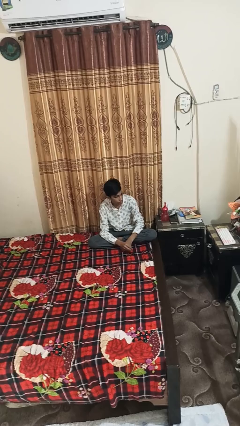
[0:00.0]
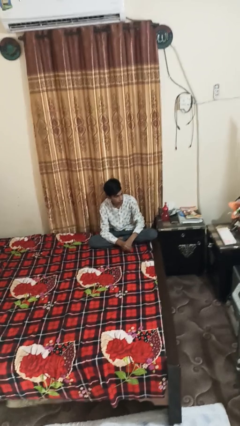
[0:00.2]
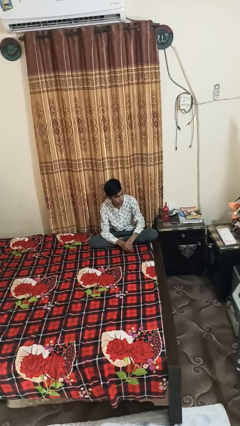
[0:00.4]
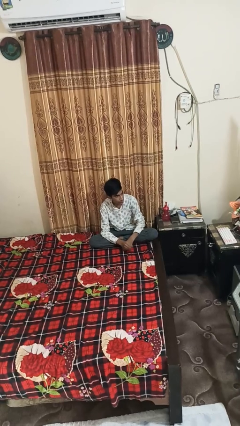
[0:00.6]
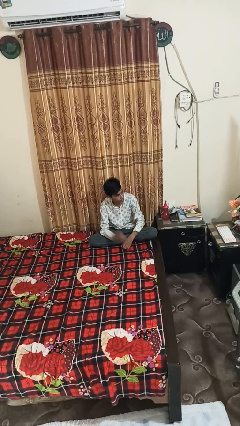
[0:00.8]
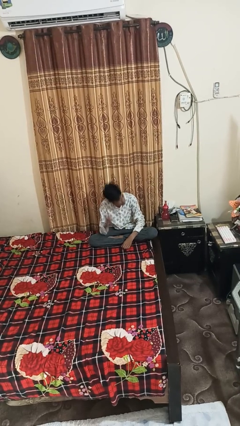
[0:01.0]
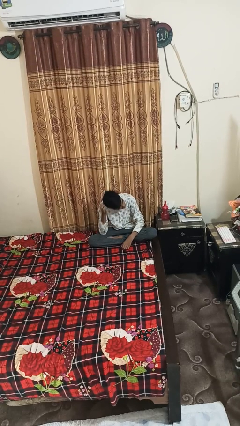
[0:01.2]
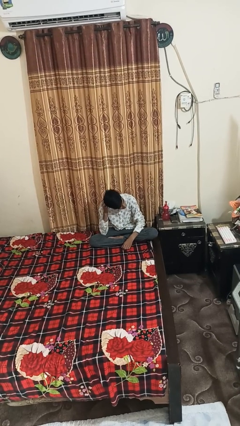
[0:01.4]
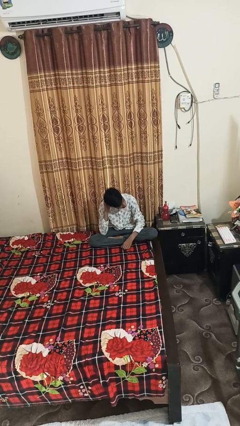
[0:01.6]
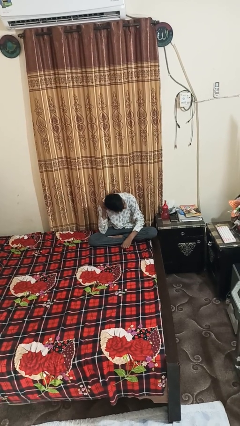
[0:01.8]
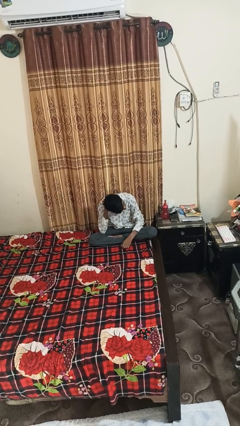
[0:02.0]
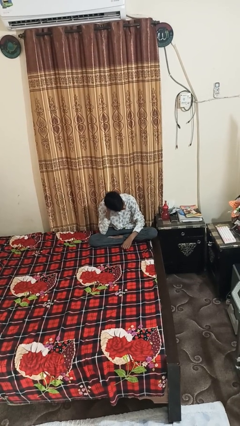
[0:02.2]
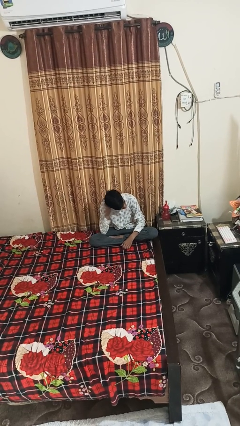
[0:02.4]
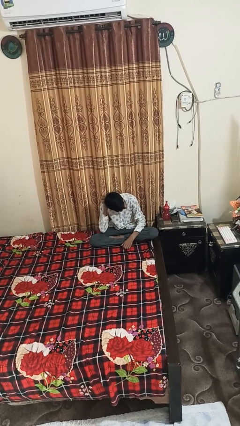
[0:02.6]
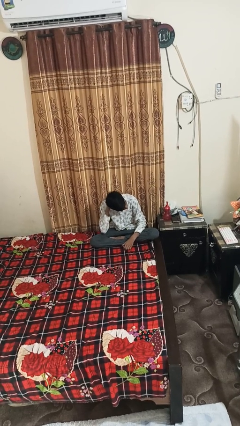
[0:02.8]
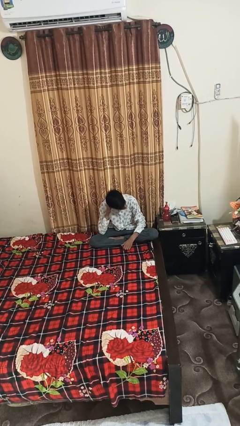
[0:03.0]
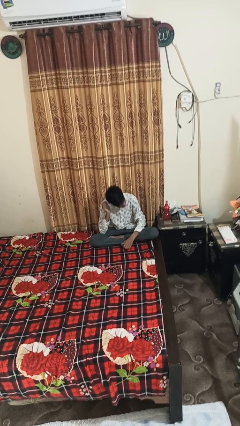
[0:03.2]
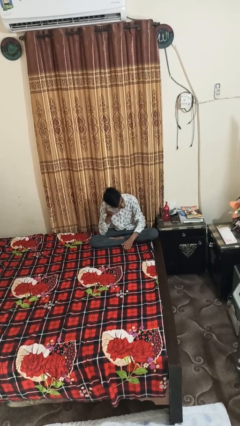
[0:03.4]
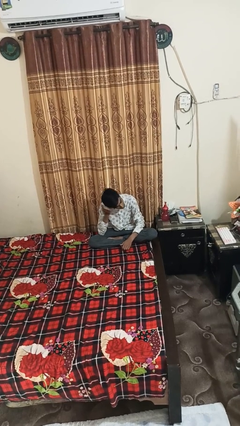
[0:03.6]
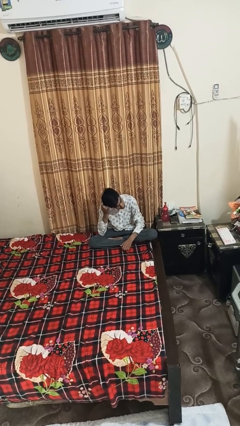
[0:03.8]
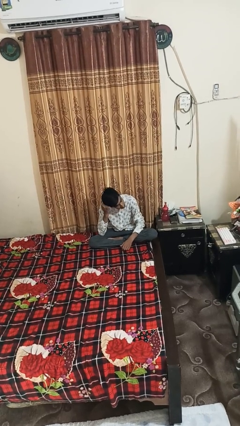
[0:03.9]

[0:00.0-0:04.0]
person strokes hair

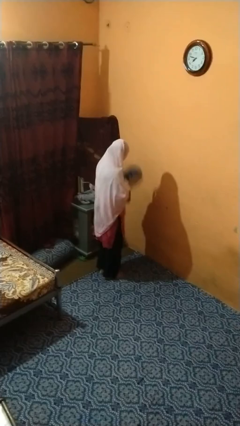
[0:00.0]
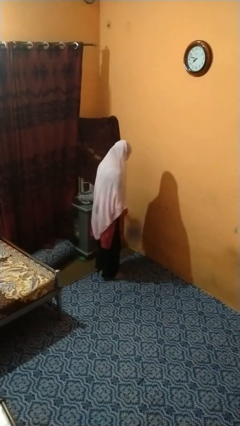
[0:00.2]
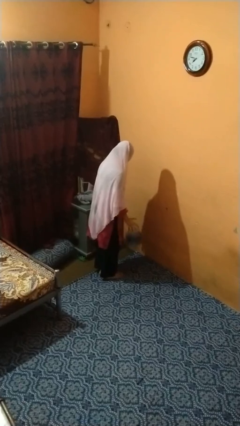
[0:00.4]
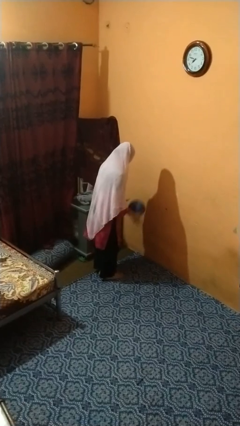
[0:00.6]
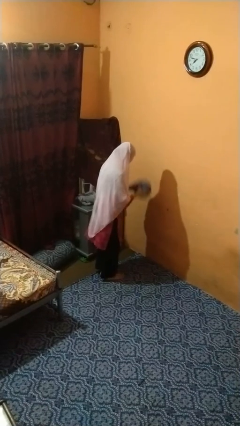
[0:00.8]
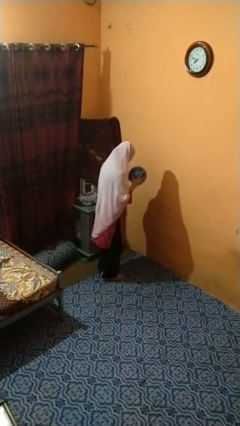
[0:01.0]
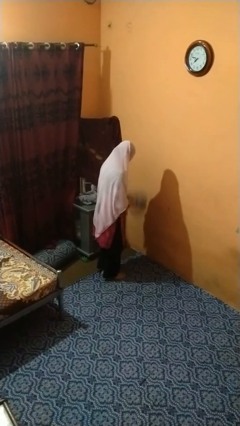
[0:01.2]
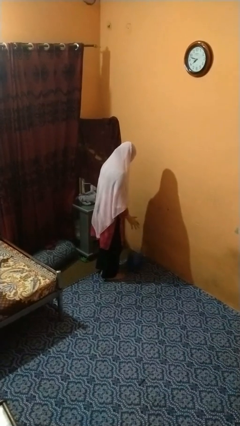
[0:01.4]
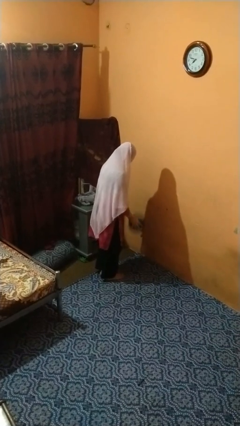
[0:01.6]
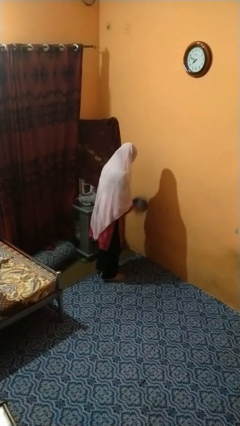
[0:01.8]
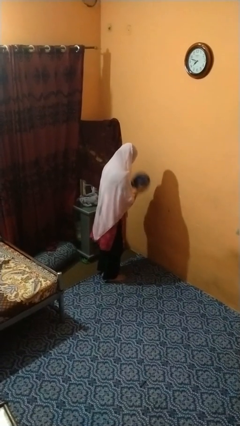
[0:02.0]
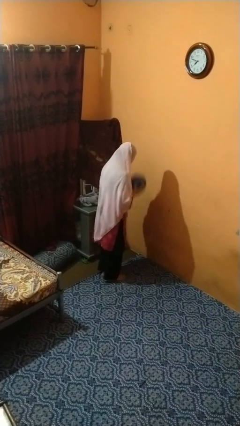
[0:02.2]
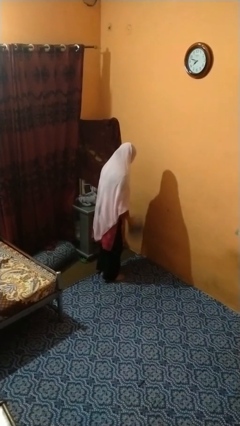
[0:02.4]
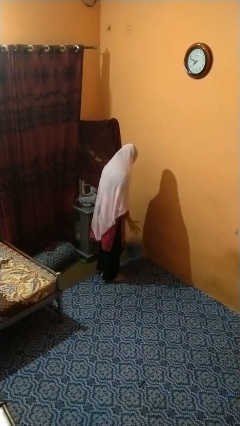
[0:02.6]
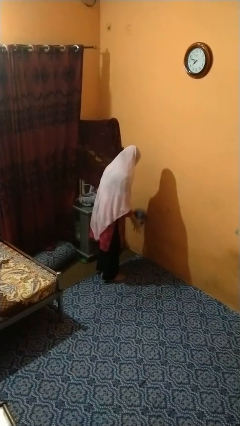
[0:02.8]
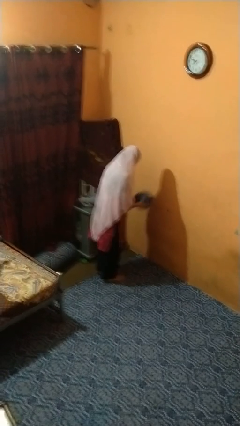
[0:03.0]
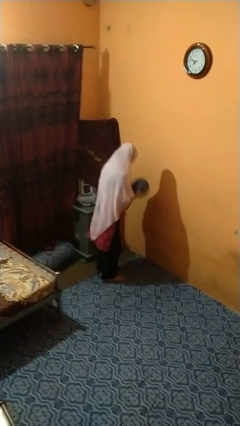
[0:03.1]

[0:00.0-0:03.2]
person bounces ball on floor

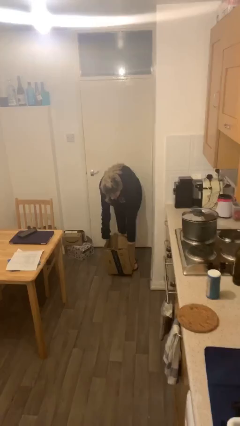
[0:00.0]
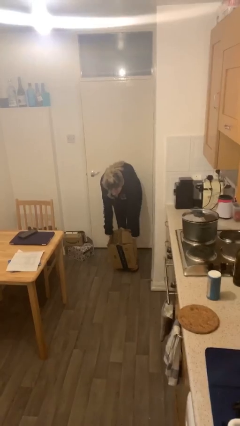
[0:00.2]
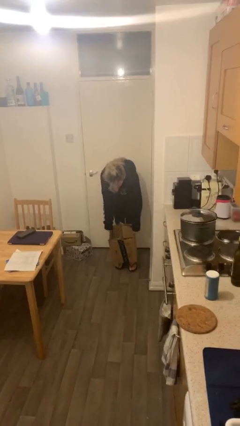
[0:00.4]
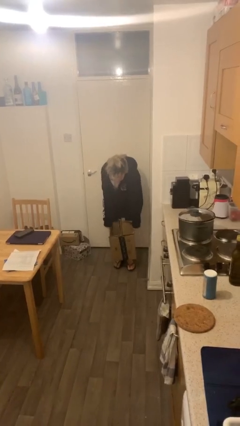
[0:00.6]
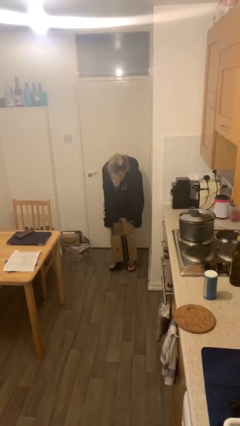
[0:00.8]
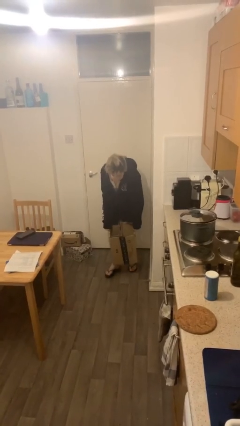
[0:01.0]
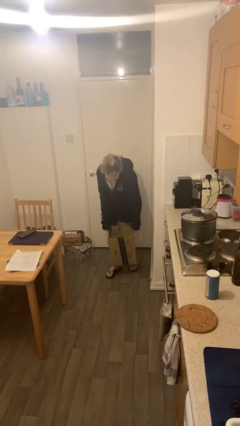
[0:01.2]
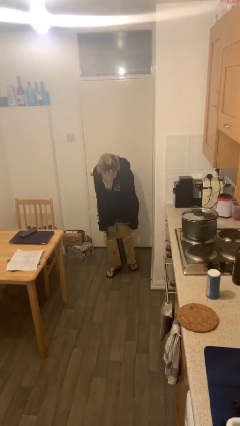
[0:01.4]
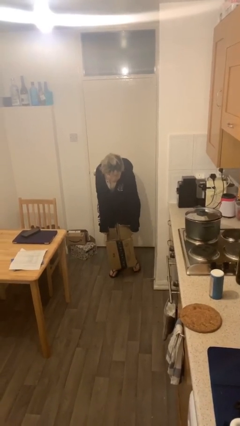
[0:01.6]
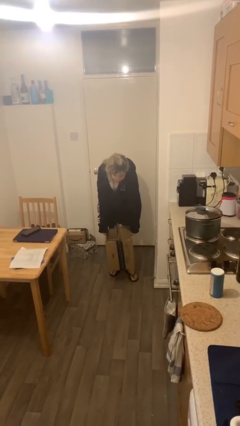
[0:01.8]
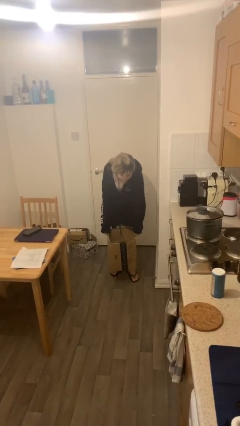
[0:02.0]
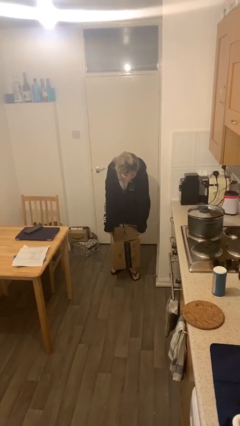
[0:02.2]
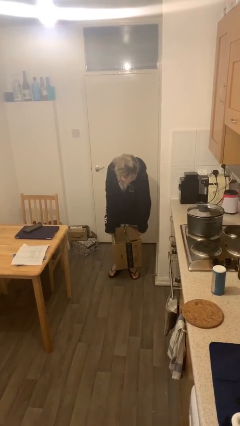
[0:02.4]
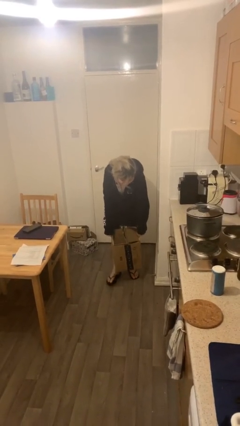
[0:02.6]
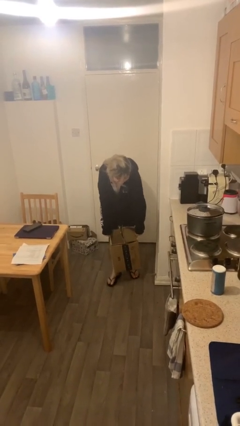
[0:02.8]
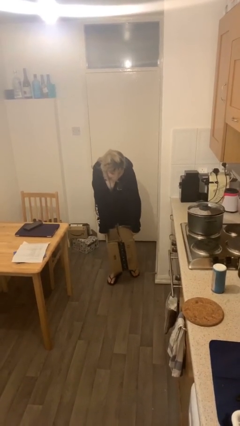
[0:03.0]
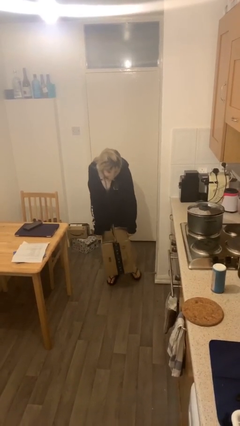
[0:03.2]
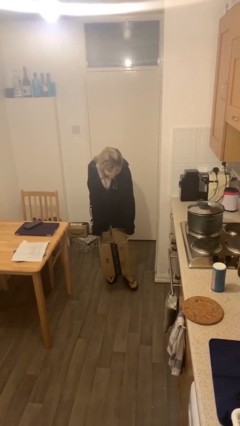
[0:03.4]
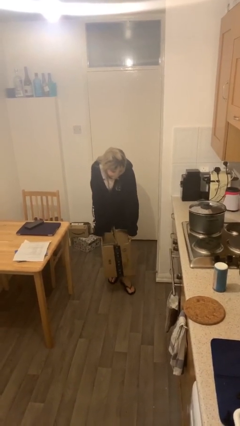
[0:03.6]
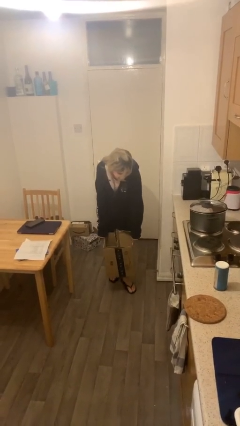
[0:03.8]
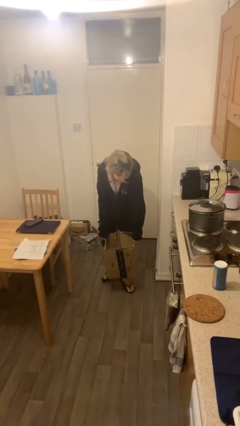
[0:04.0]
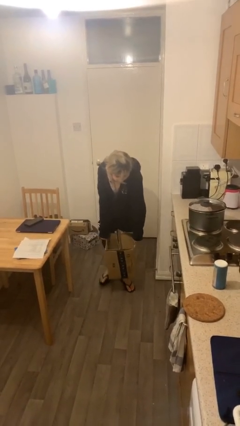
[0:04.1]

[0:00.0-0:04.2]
person carries heavy object

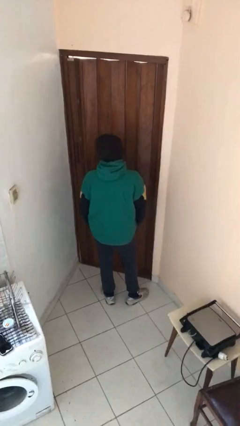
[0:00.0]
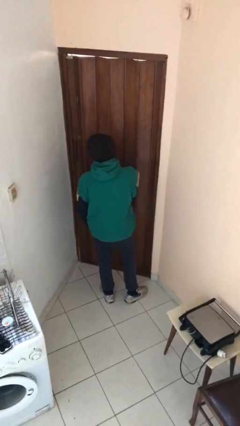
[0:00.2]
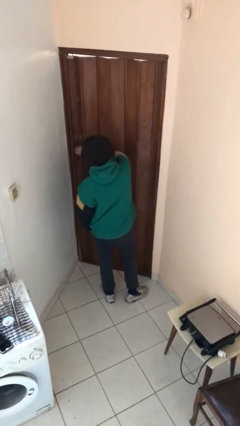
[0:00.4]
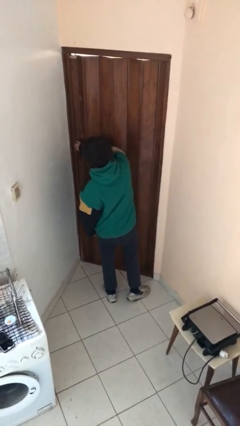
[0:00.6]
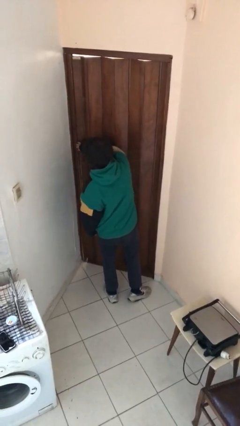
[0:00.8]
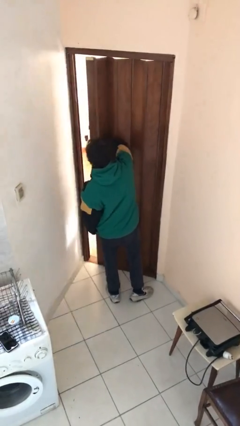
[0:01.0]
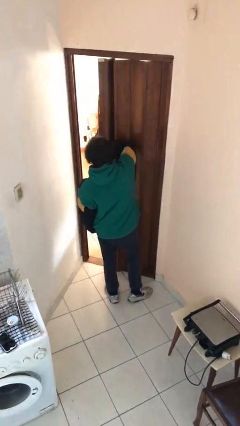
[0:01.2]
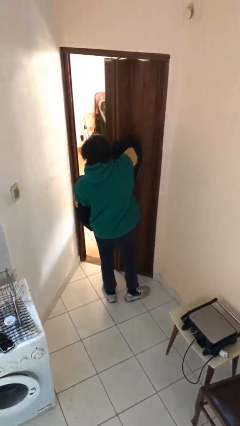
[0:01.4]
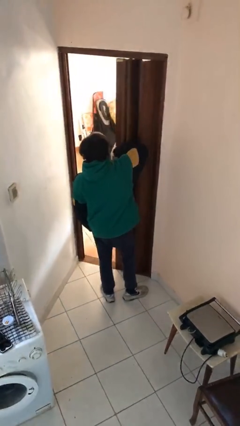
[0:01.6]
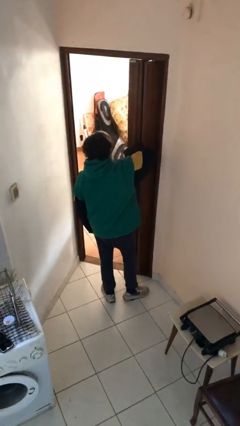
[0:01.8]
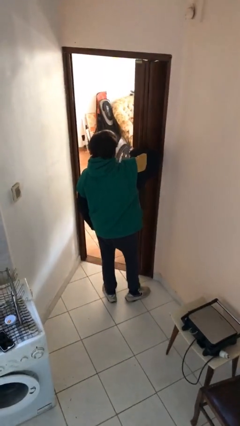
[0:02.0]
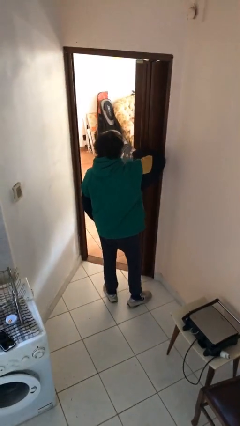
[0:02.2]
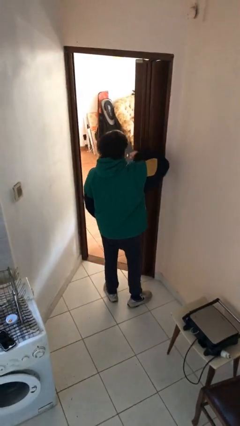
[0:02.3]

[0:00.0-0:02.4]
person opens sliding door

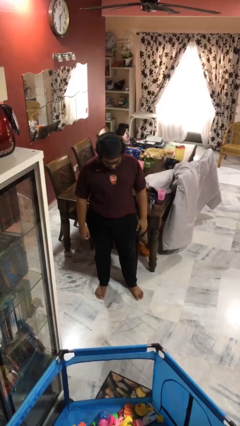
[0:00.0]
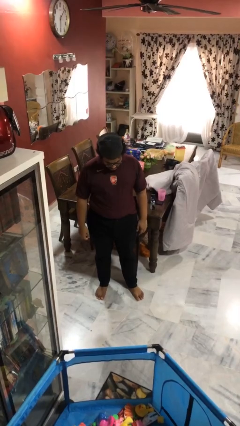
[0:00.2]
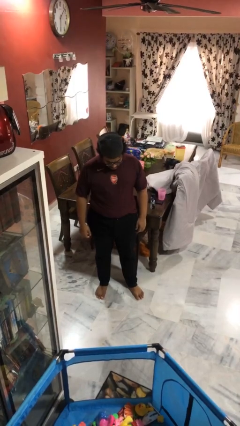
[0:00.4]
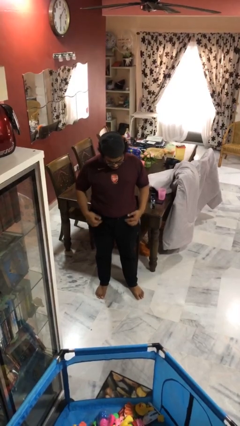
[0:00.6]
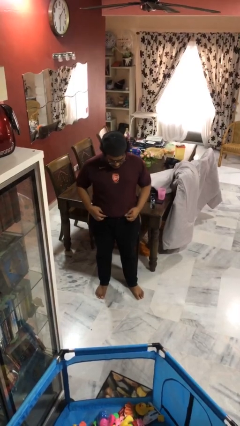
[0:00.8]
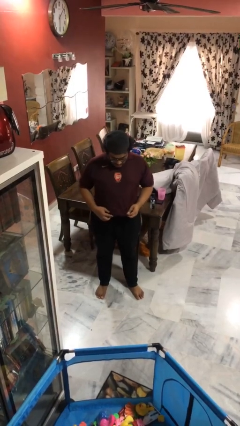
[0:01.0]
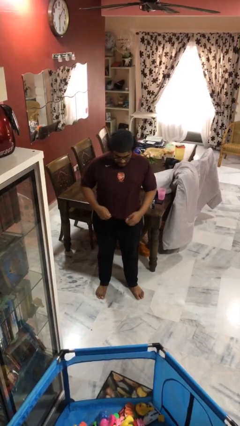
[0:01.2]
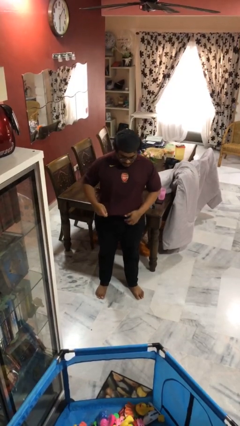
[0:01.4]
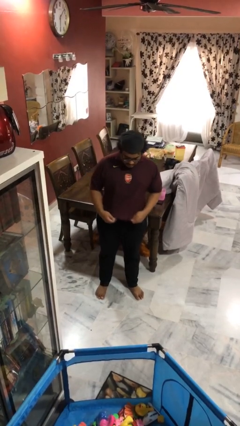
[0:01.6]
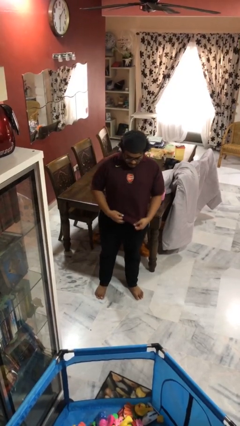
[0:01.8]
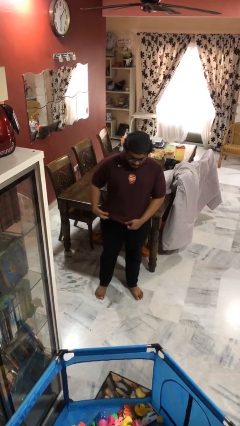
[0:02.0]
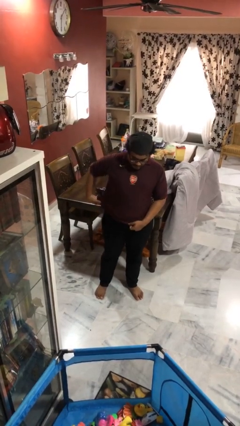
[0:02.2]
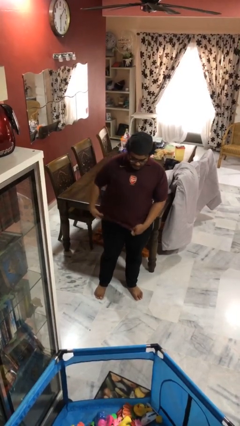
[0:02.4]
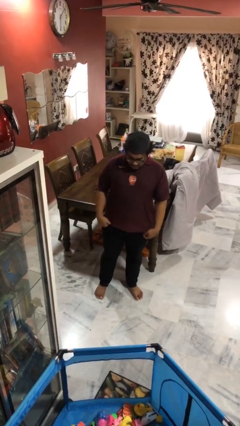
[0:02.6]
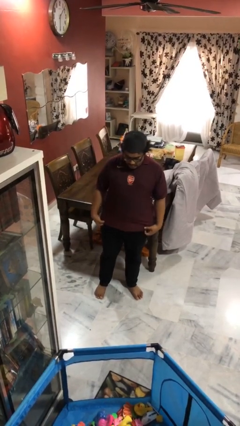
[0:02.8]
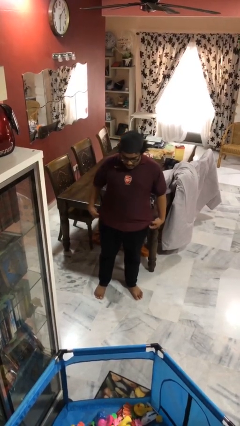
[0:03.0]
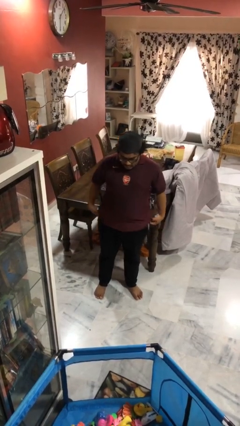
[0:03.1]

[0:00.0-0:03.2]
person untucks shirt
